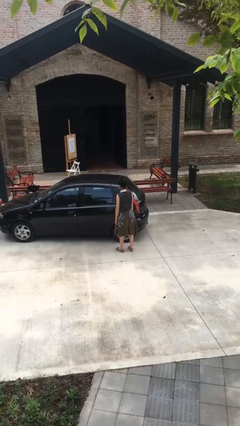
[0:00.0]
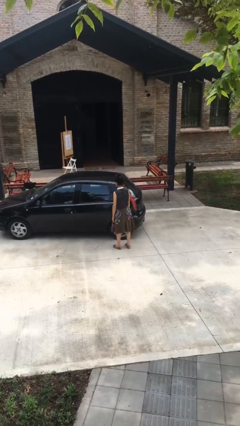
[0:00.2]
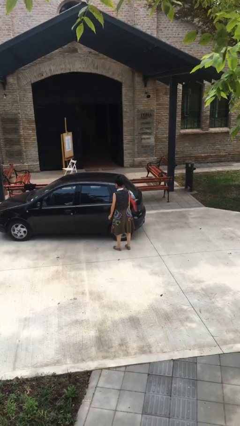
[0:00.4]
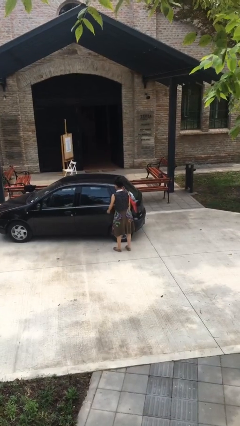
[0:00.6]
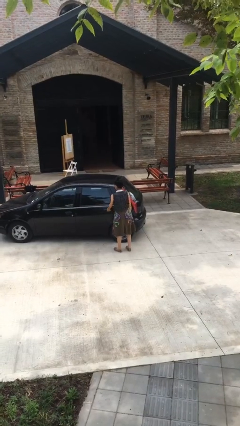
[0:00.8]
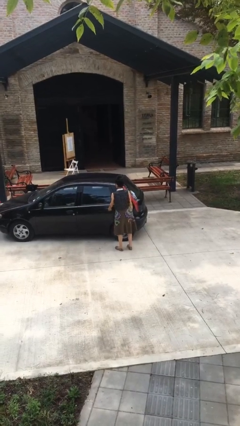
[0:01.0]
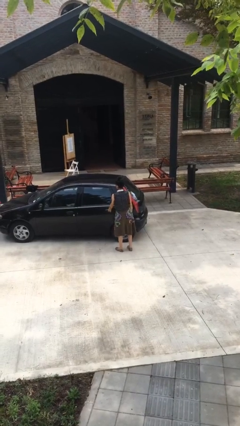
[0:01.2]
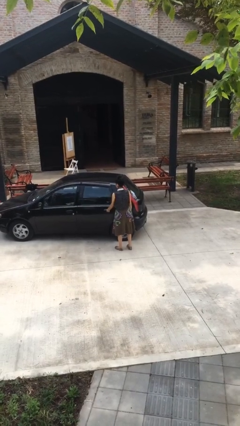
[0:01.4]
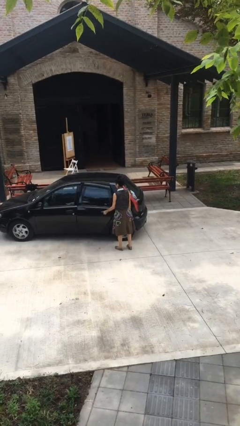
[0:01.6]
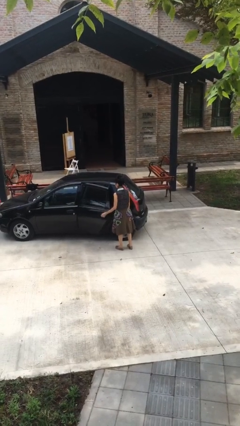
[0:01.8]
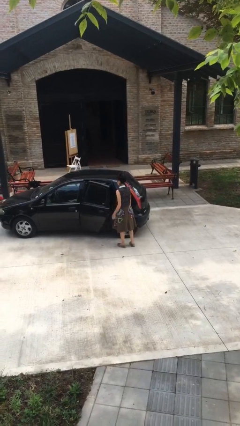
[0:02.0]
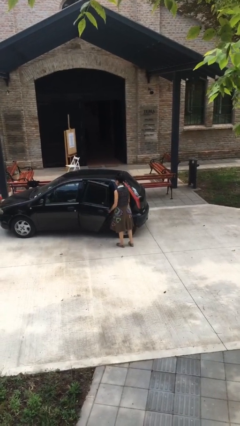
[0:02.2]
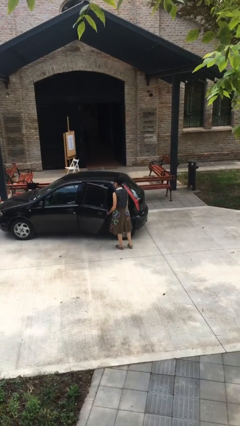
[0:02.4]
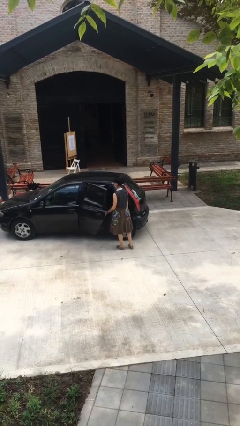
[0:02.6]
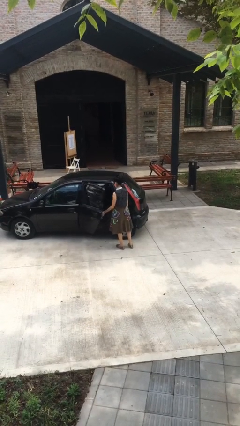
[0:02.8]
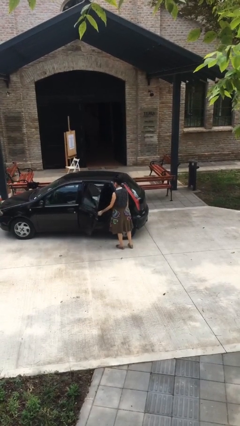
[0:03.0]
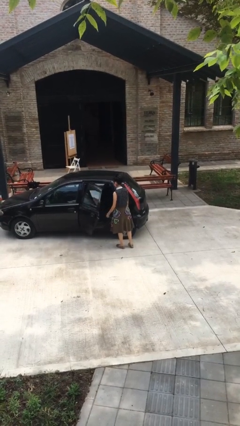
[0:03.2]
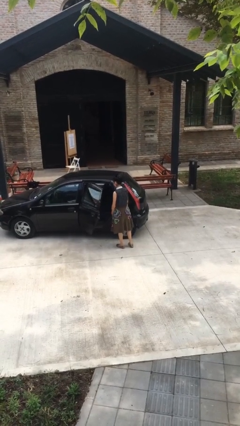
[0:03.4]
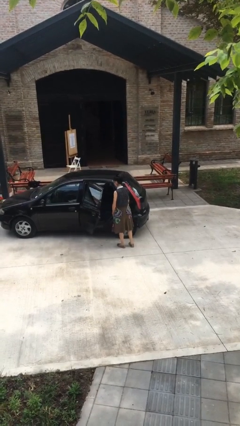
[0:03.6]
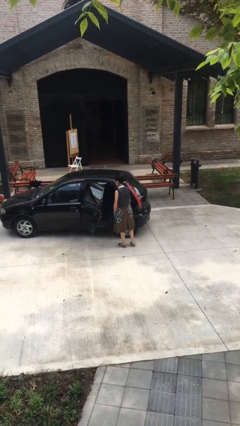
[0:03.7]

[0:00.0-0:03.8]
person opens car door

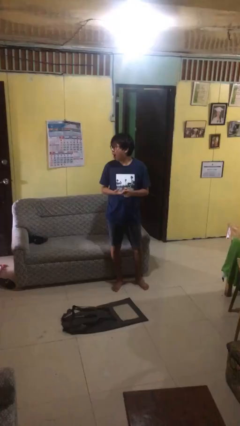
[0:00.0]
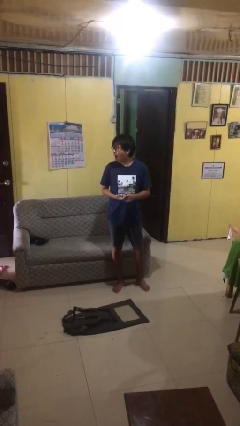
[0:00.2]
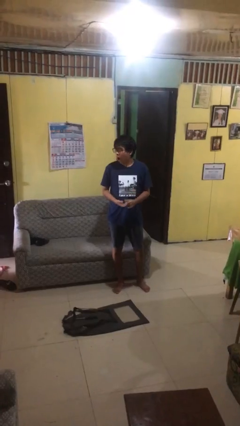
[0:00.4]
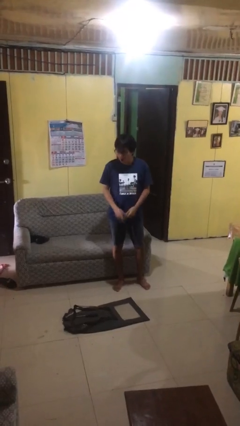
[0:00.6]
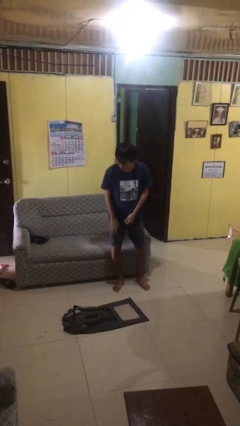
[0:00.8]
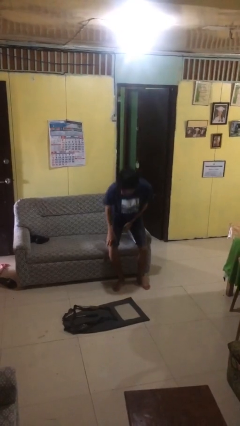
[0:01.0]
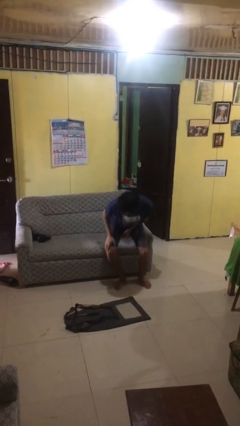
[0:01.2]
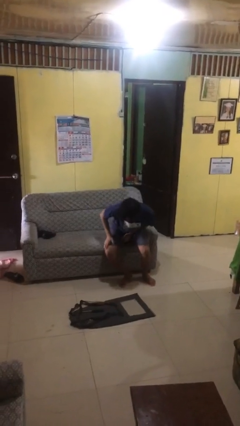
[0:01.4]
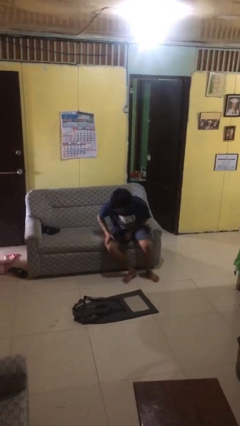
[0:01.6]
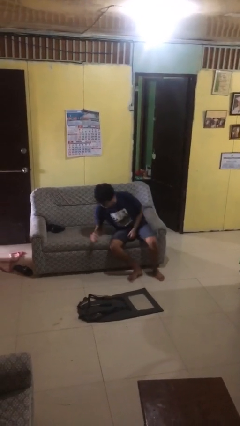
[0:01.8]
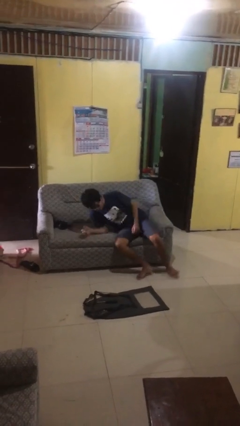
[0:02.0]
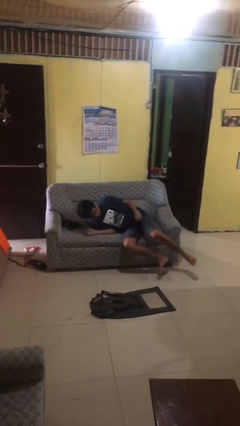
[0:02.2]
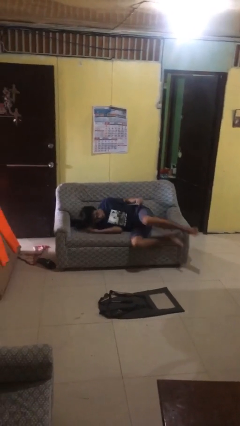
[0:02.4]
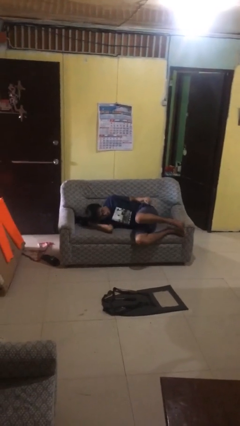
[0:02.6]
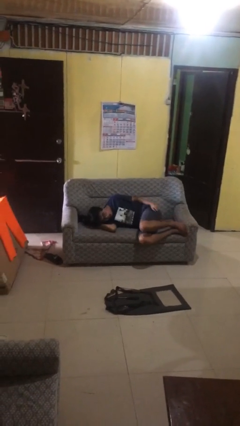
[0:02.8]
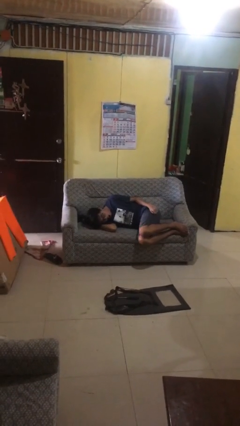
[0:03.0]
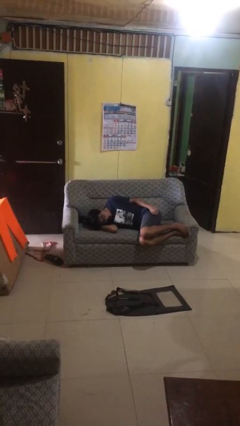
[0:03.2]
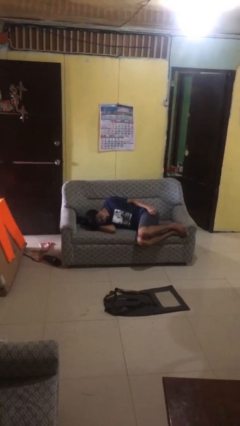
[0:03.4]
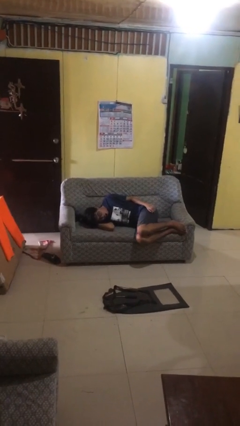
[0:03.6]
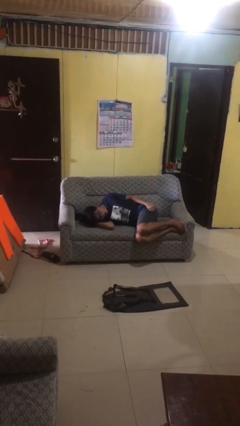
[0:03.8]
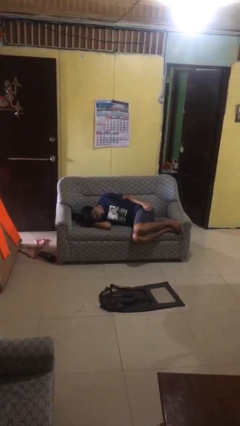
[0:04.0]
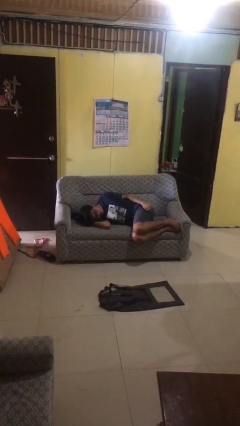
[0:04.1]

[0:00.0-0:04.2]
person lies down on couch

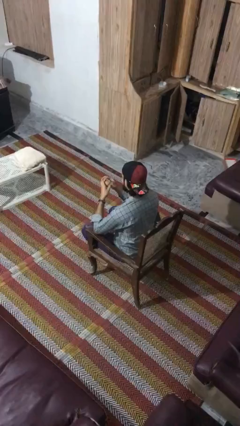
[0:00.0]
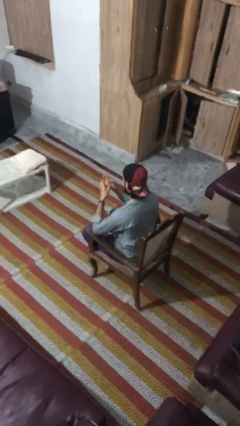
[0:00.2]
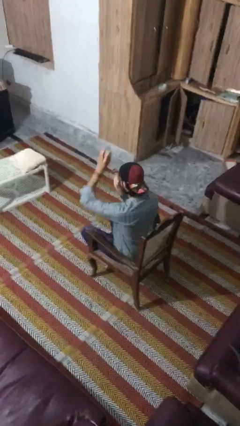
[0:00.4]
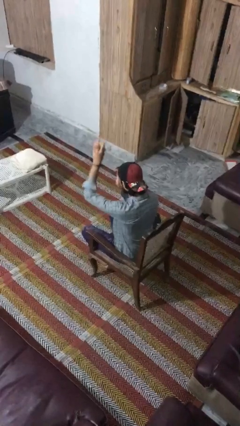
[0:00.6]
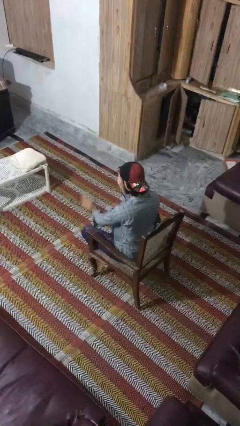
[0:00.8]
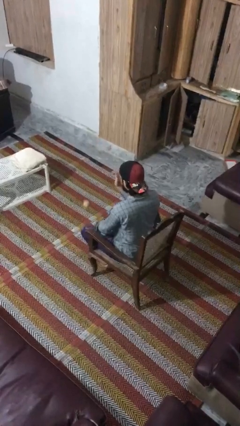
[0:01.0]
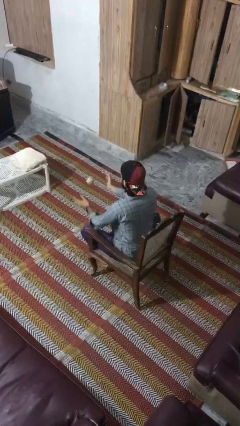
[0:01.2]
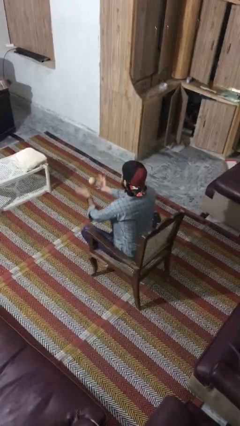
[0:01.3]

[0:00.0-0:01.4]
person bounces ball on floor

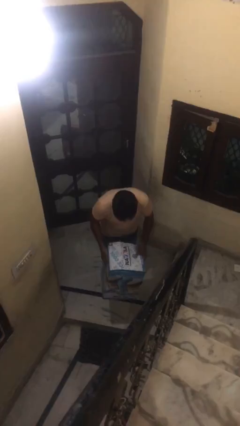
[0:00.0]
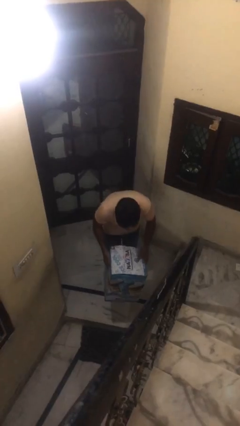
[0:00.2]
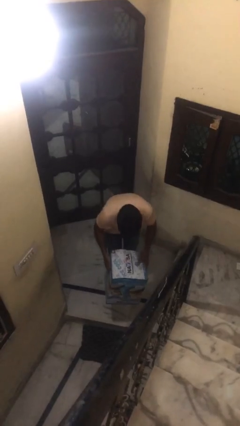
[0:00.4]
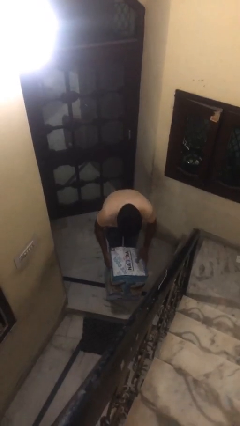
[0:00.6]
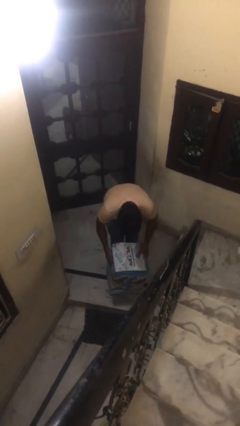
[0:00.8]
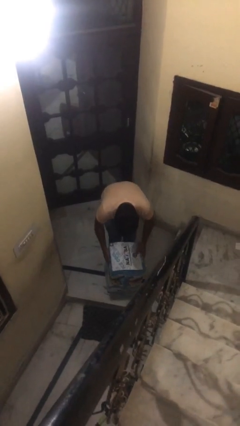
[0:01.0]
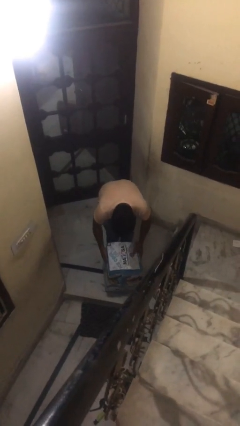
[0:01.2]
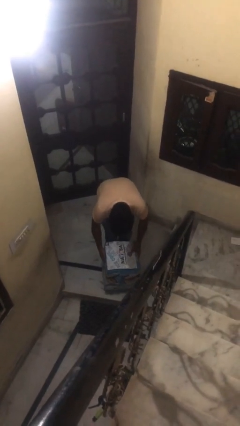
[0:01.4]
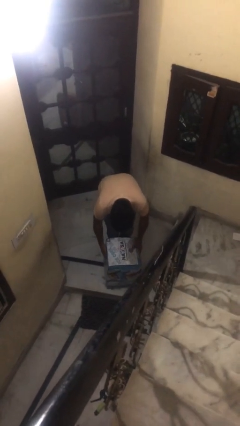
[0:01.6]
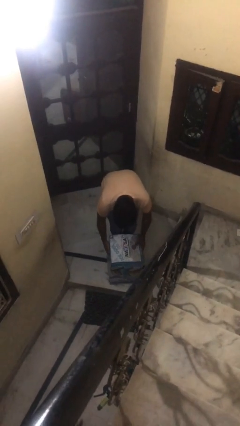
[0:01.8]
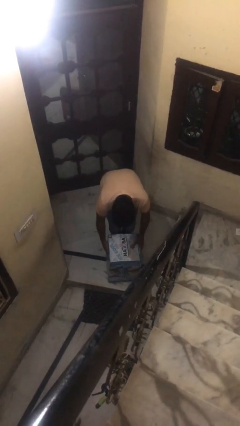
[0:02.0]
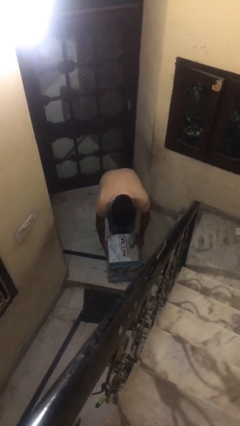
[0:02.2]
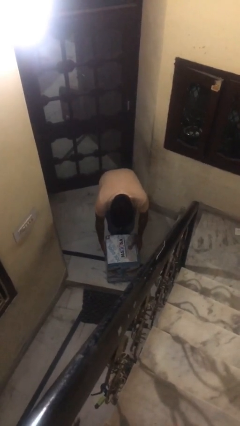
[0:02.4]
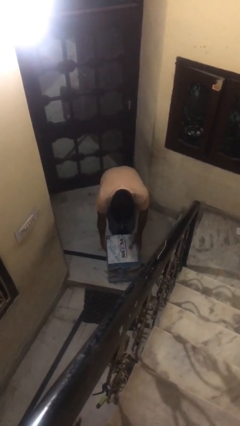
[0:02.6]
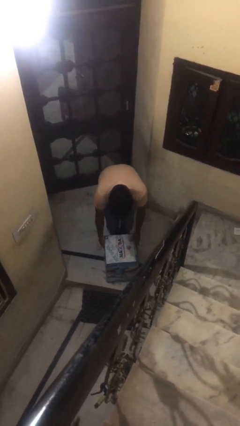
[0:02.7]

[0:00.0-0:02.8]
person puts down object on floor

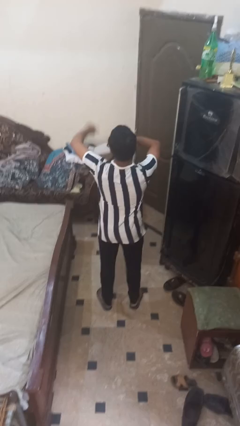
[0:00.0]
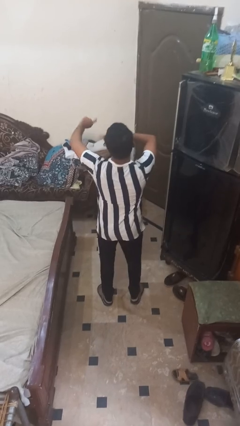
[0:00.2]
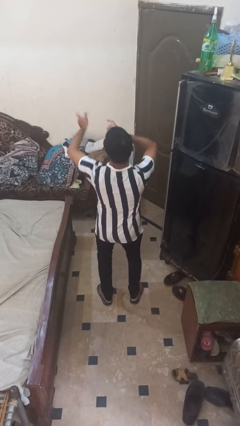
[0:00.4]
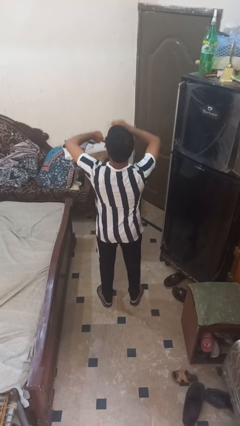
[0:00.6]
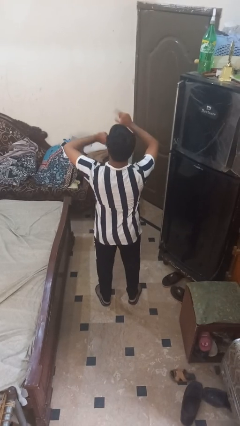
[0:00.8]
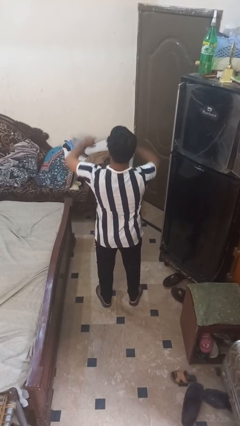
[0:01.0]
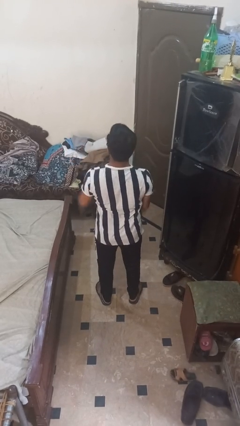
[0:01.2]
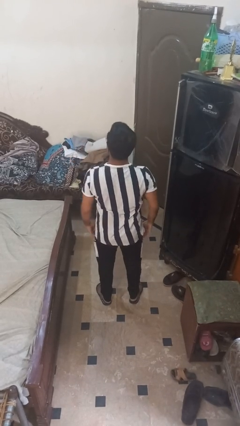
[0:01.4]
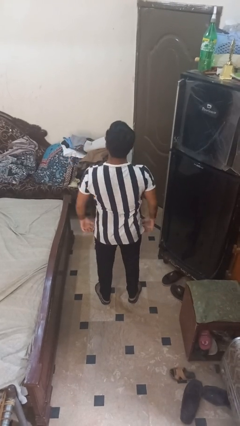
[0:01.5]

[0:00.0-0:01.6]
person dances in place

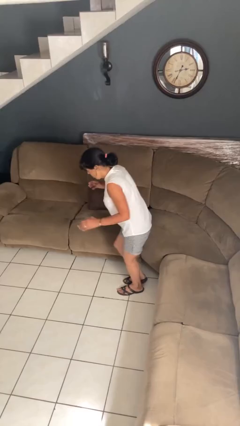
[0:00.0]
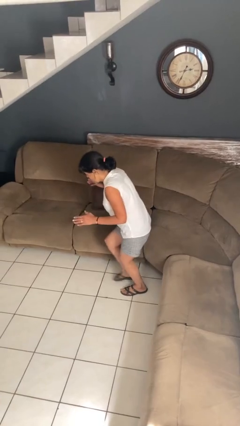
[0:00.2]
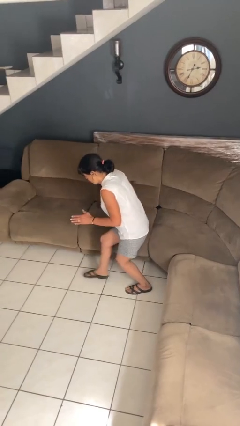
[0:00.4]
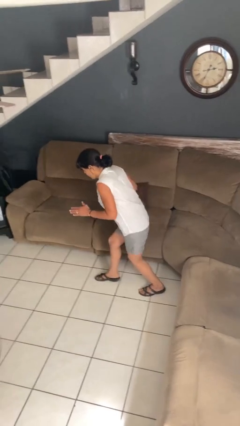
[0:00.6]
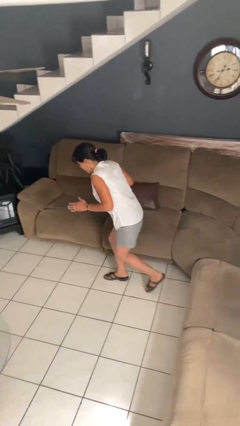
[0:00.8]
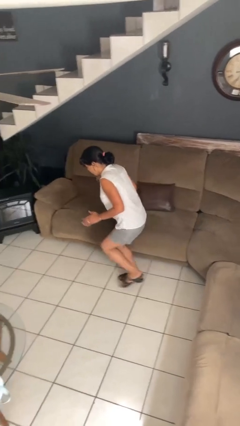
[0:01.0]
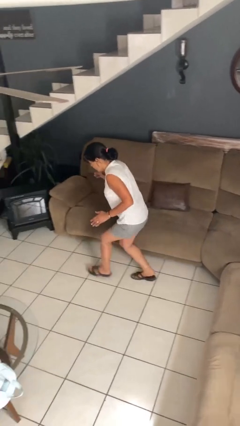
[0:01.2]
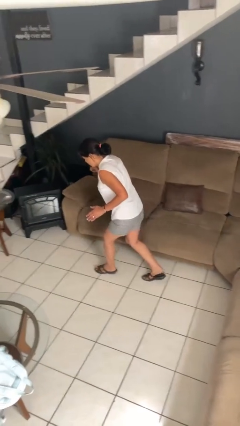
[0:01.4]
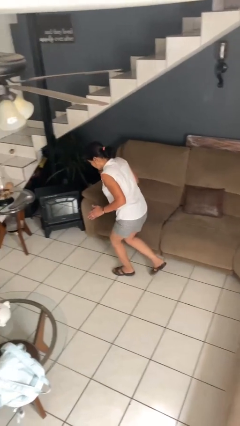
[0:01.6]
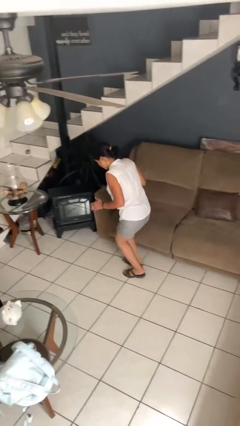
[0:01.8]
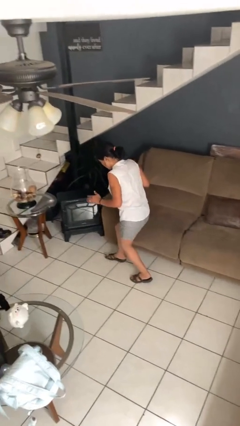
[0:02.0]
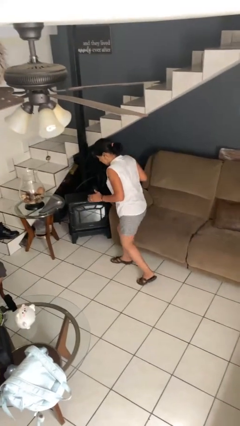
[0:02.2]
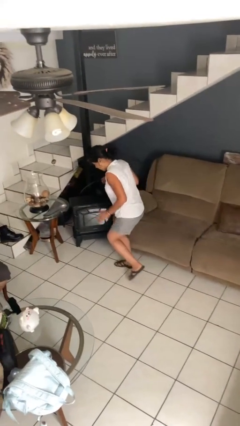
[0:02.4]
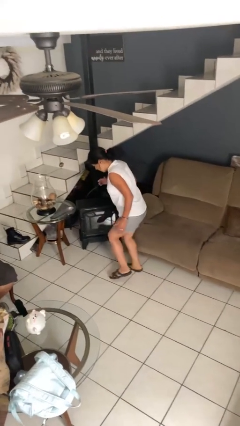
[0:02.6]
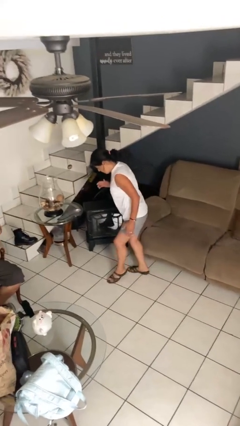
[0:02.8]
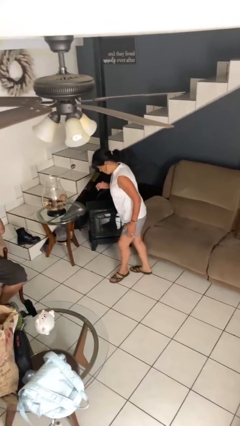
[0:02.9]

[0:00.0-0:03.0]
person walks tiptoe

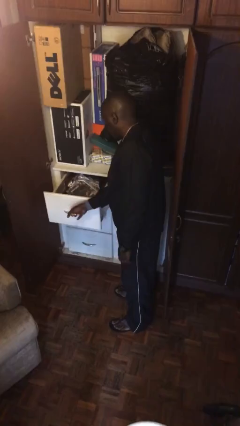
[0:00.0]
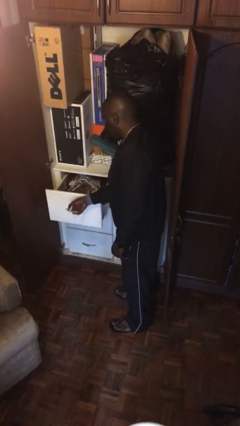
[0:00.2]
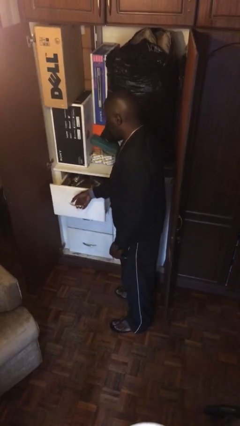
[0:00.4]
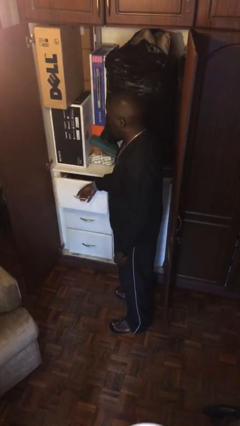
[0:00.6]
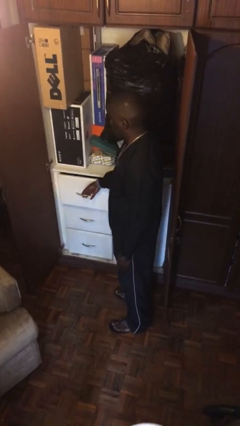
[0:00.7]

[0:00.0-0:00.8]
person closes dresser drawer
